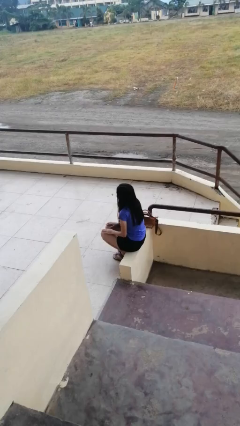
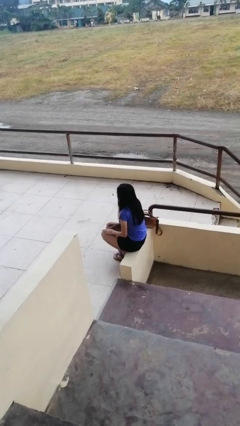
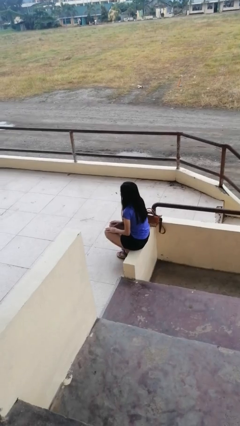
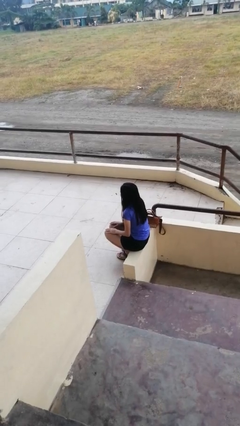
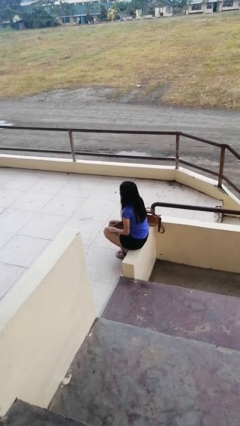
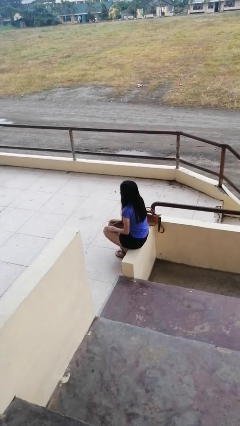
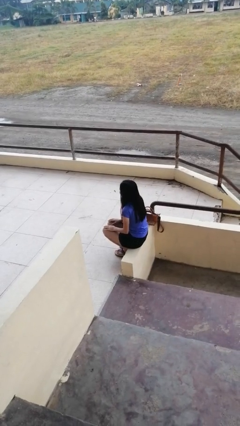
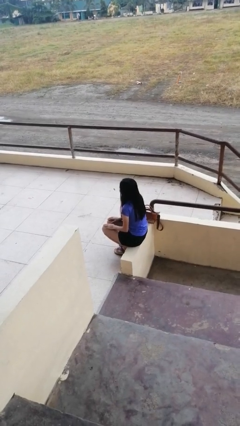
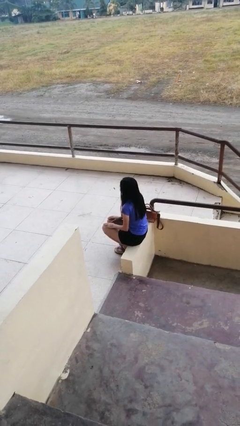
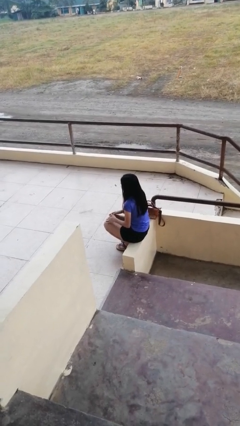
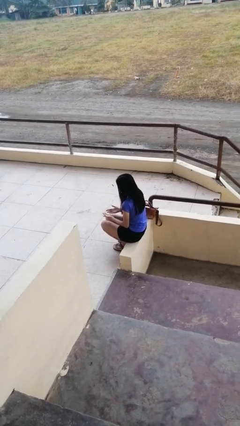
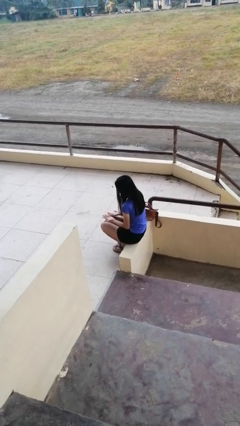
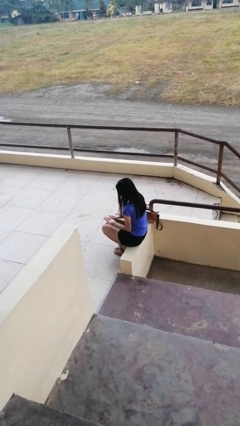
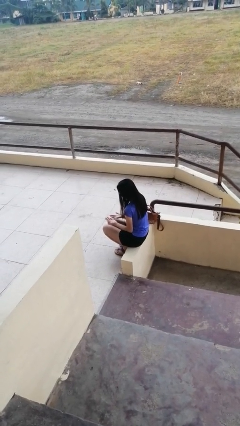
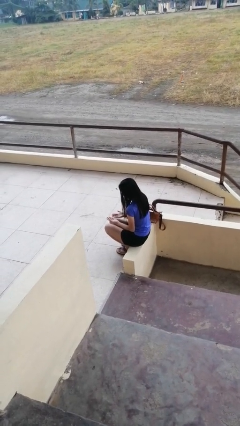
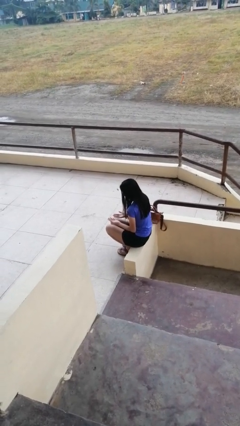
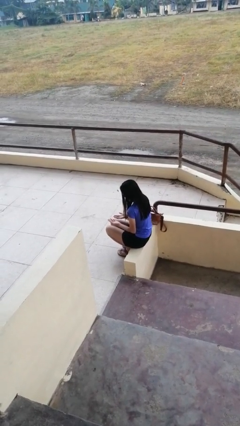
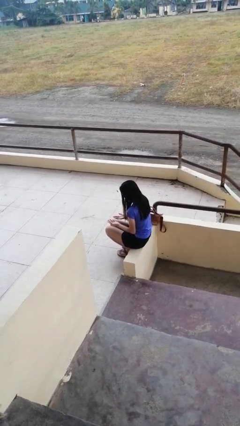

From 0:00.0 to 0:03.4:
person looks at hands in lap

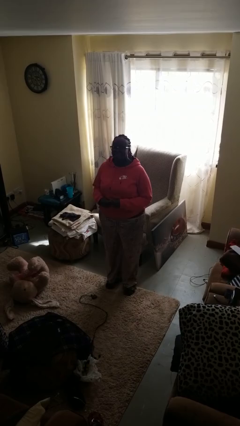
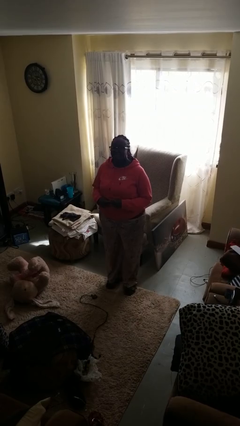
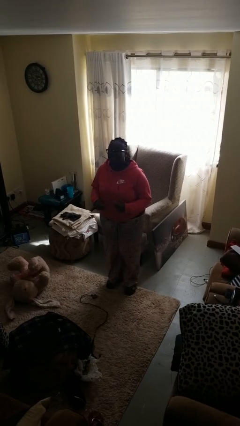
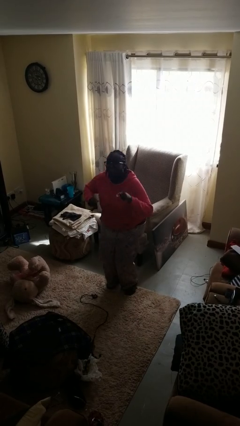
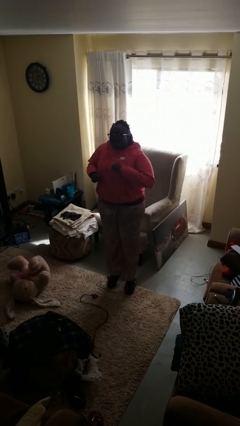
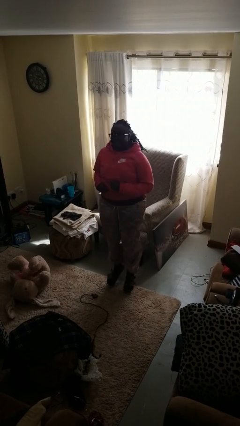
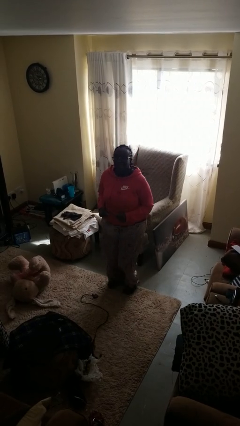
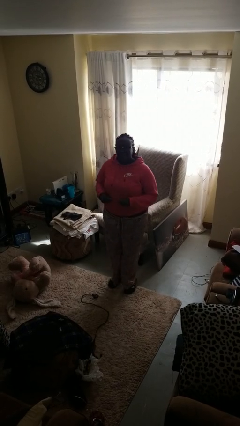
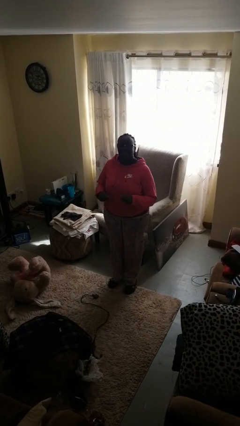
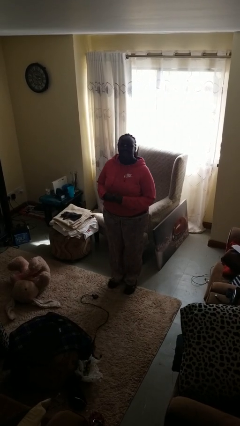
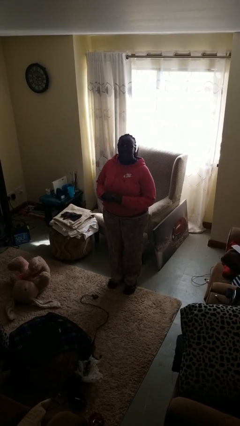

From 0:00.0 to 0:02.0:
person jumps

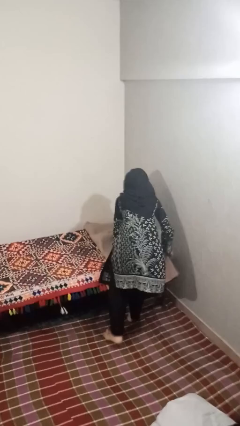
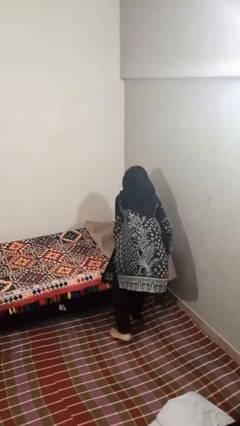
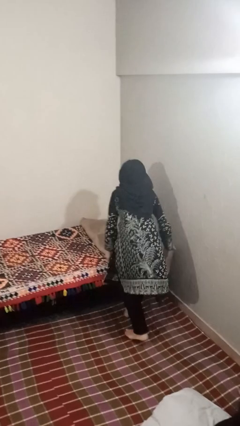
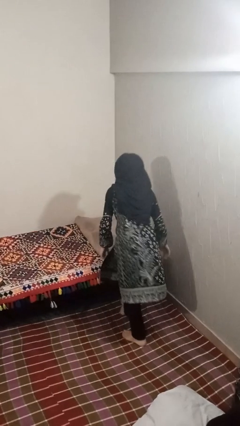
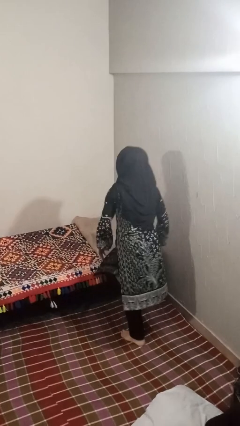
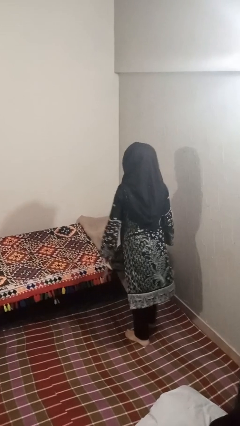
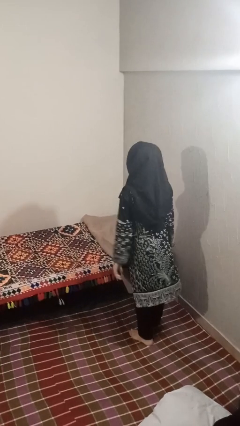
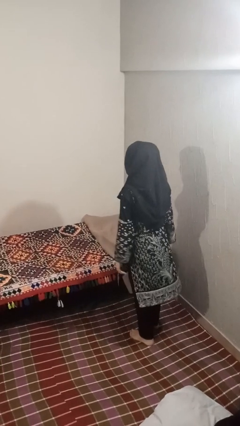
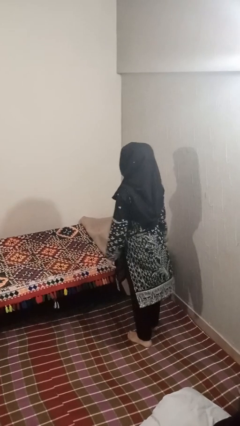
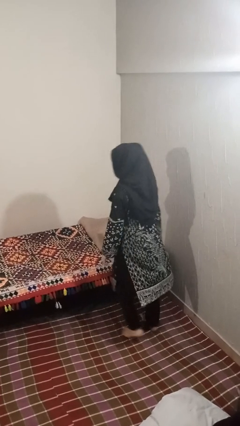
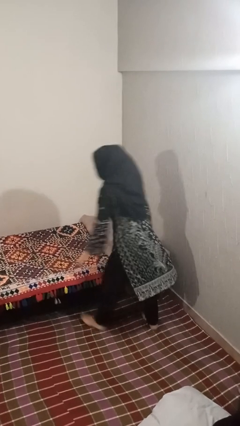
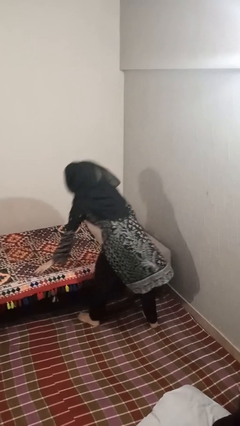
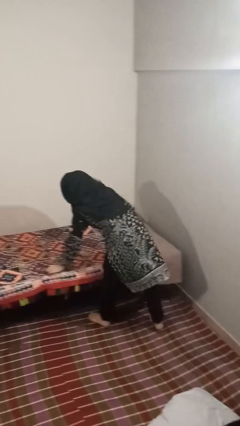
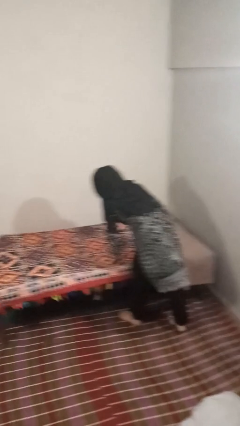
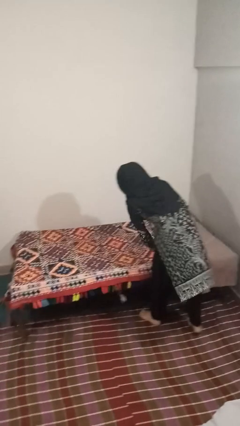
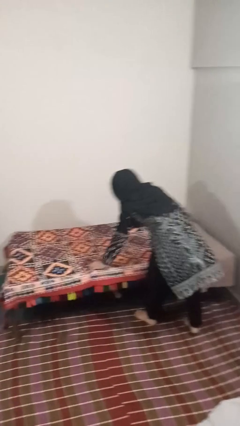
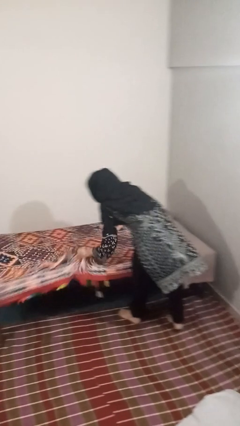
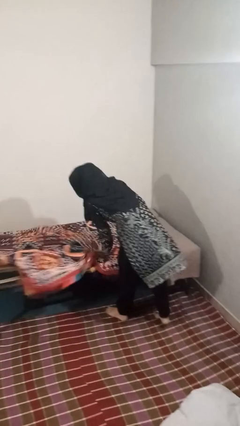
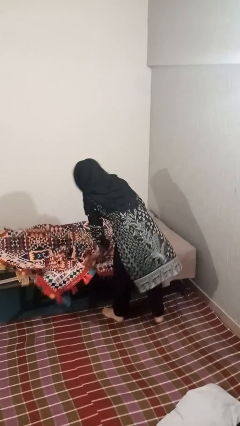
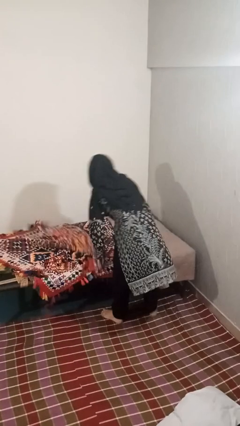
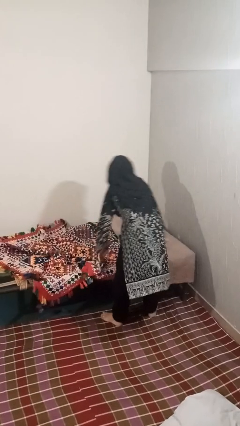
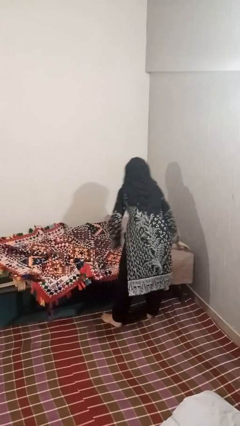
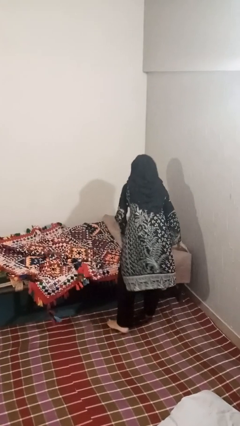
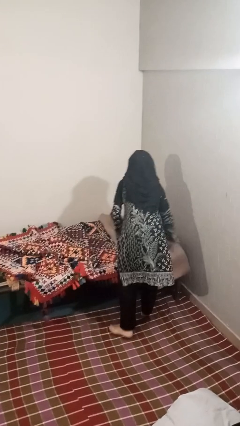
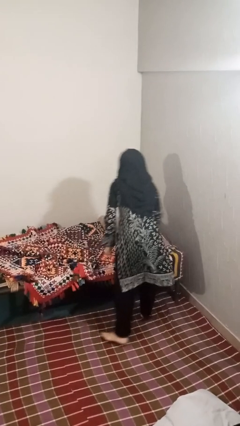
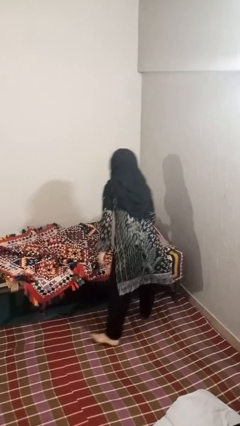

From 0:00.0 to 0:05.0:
person makes bed

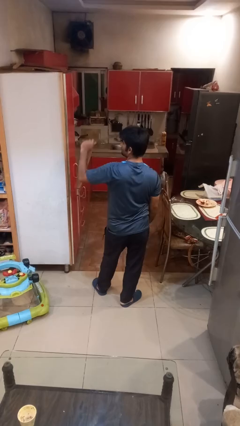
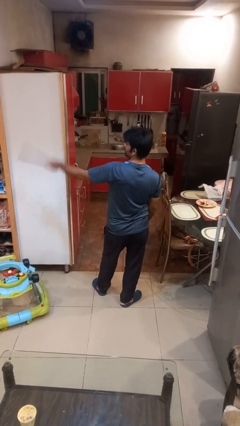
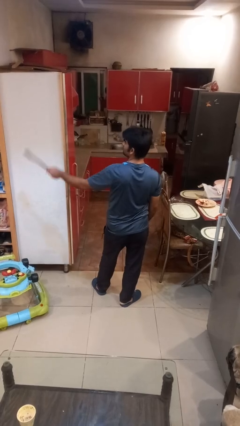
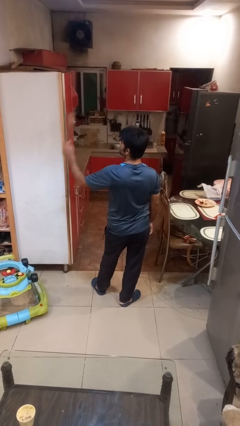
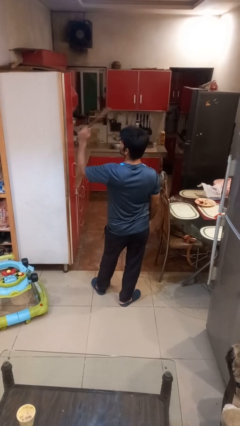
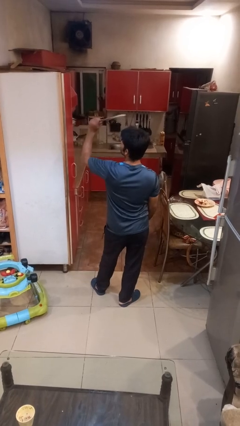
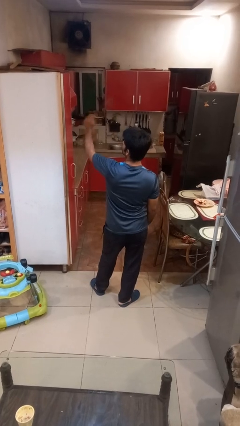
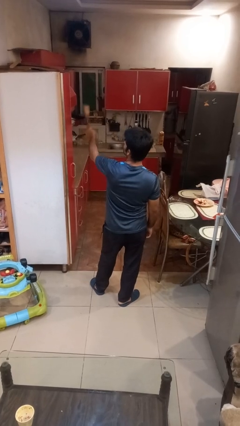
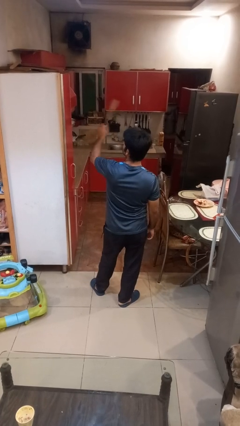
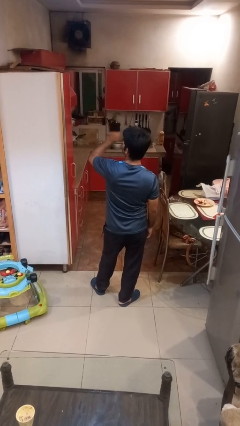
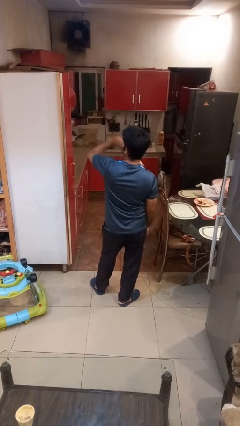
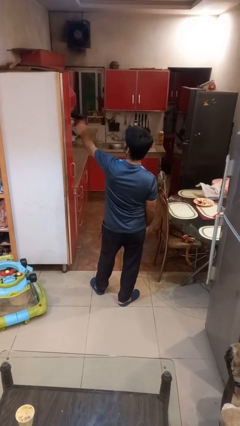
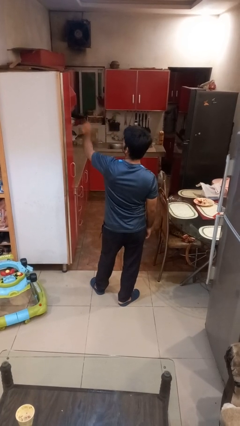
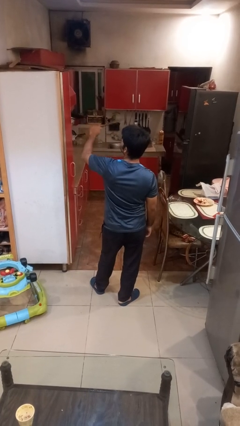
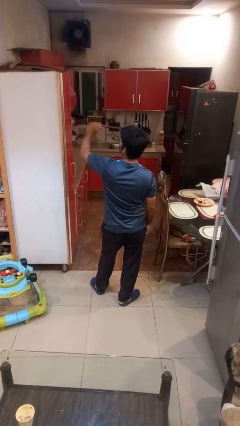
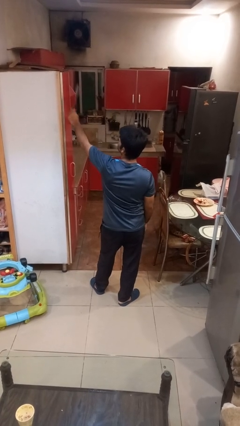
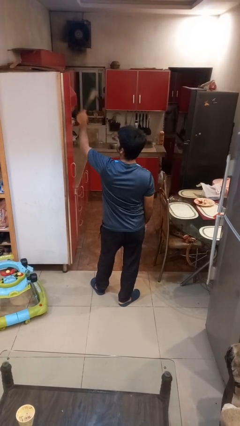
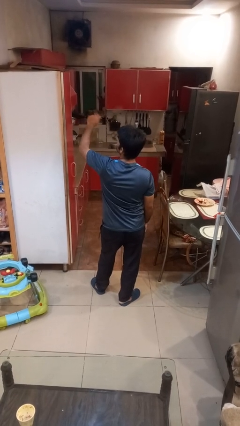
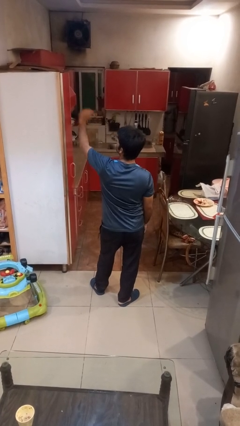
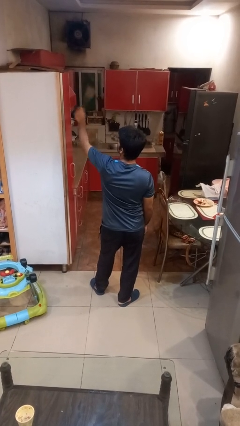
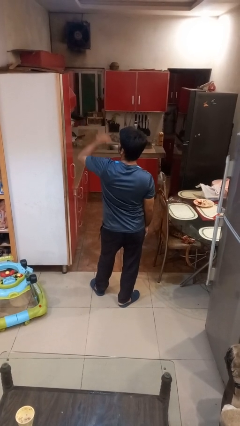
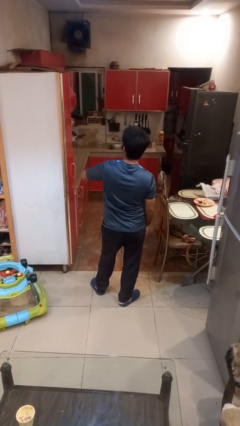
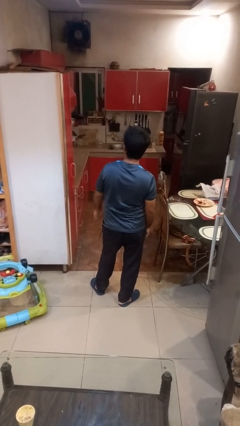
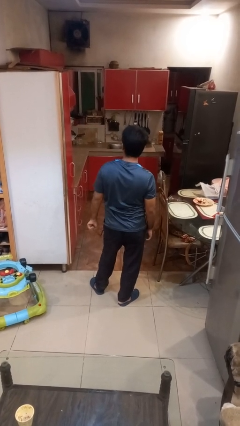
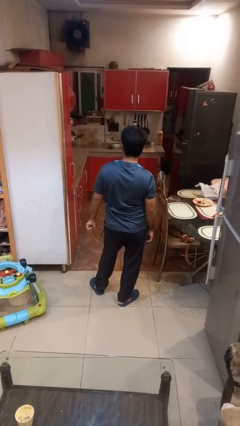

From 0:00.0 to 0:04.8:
person swats bug

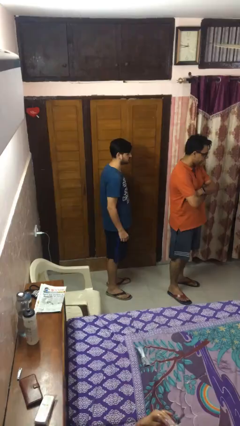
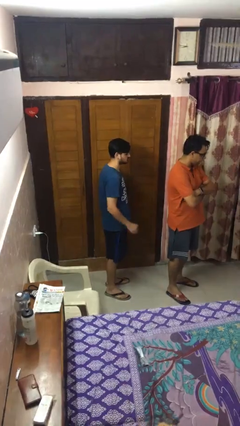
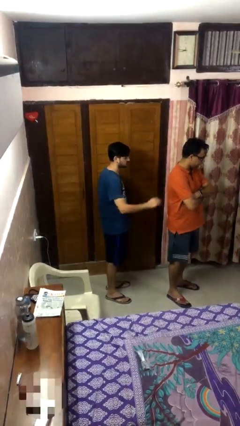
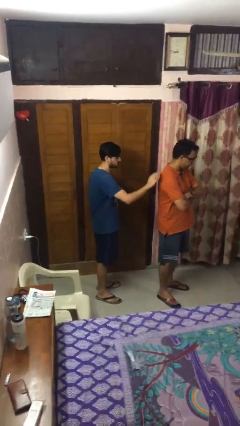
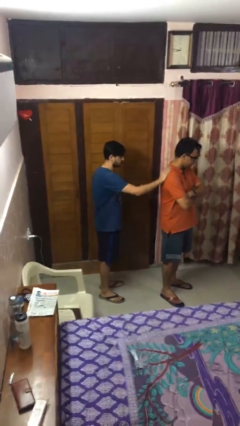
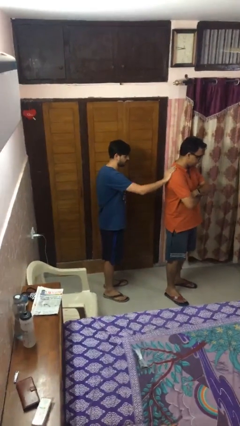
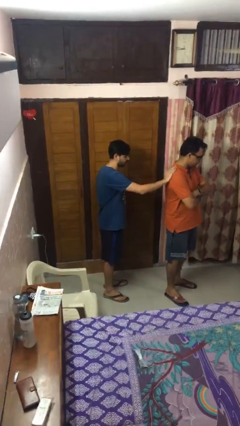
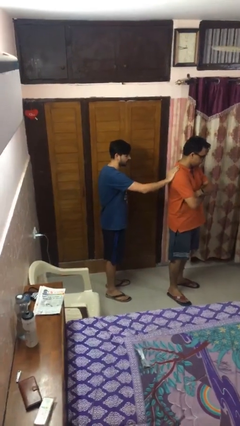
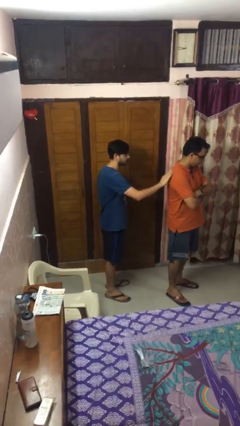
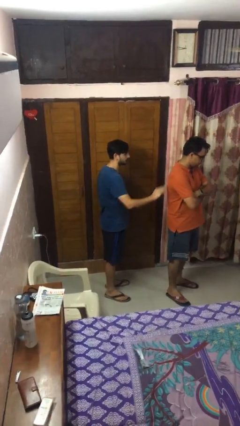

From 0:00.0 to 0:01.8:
person touches back of person

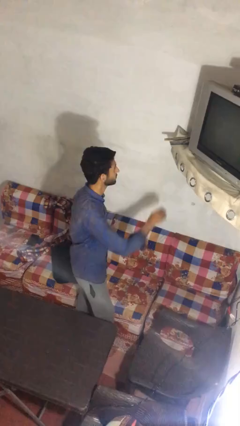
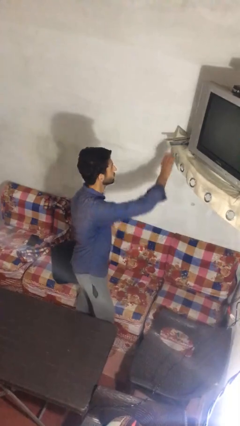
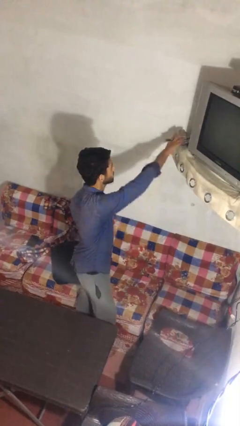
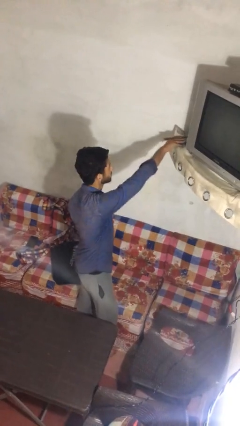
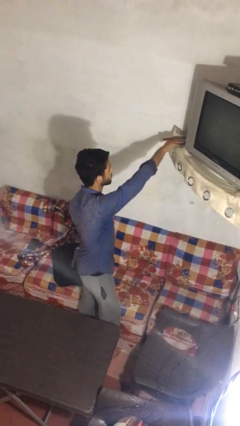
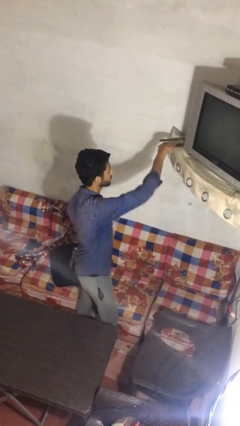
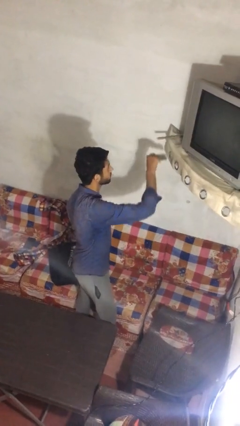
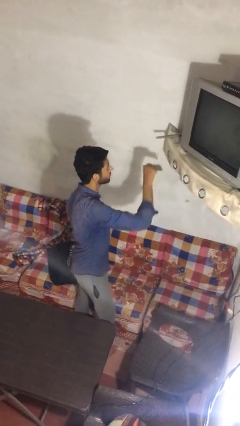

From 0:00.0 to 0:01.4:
person picks up object from shelf
